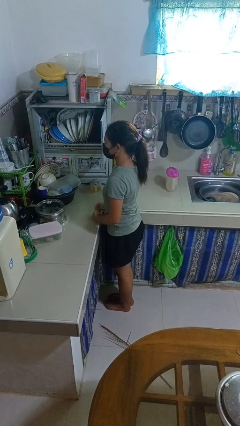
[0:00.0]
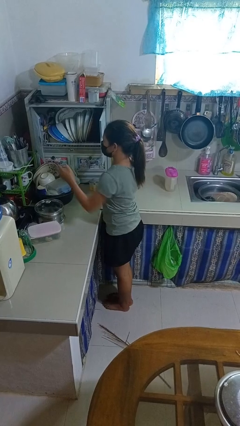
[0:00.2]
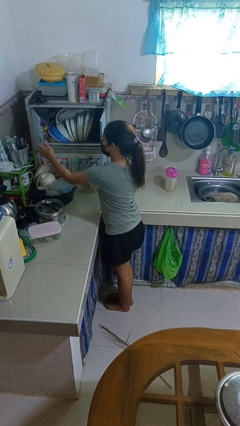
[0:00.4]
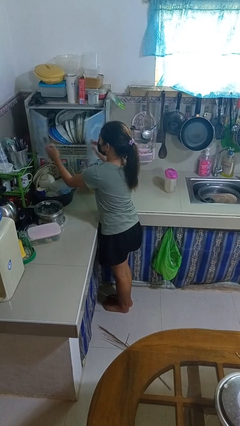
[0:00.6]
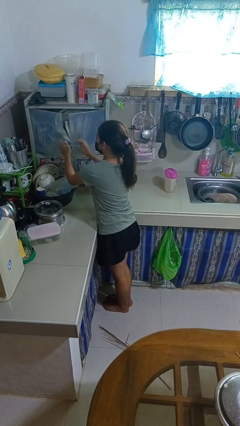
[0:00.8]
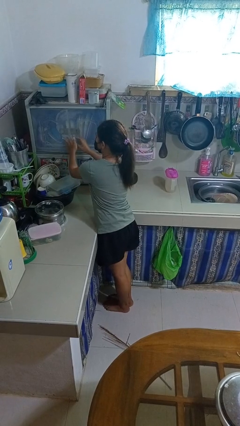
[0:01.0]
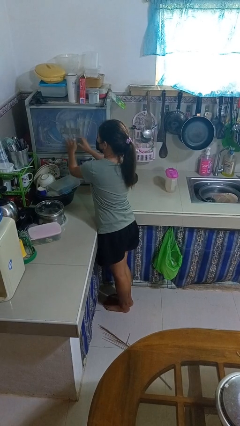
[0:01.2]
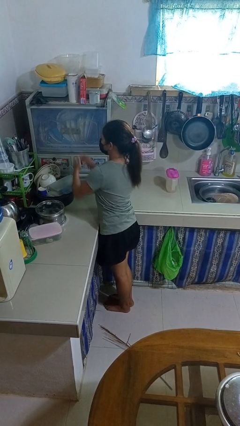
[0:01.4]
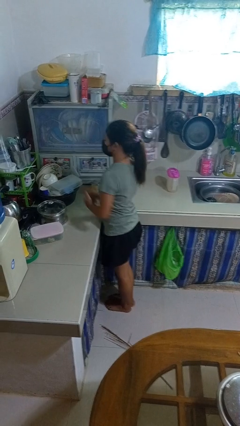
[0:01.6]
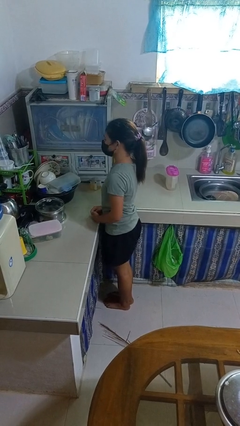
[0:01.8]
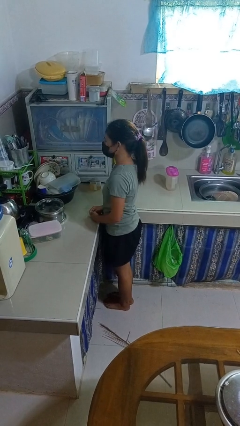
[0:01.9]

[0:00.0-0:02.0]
person closes kitchen drawer

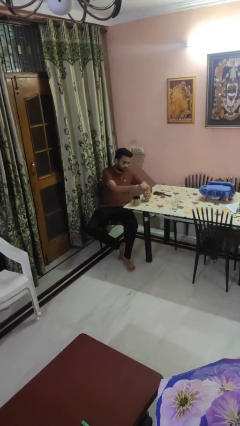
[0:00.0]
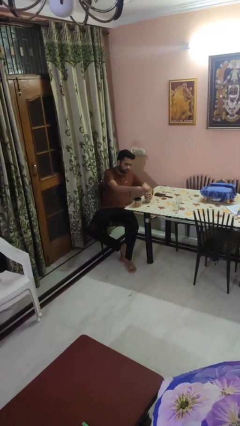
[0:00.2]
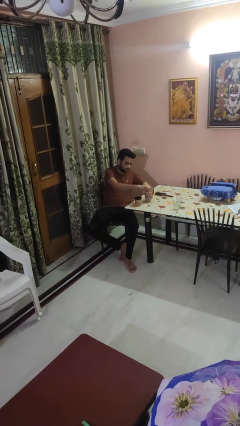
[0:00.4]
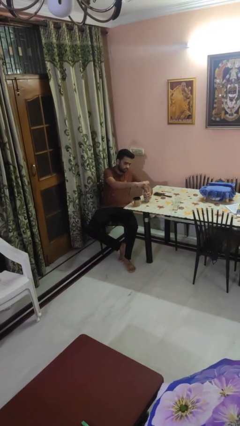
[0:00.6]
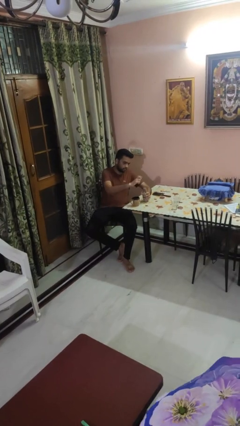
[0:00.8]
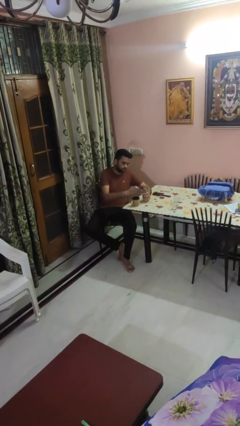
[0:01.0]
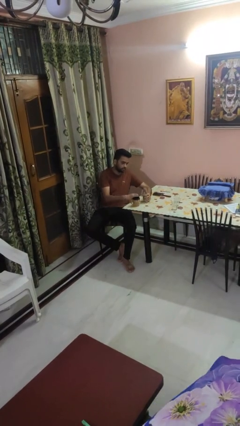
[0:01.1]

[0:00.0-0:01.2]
person unscrews lid from bottle

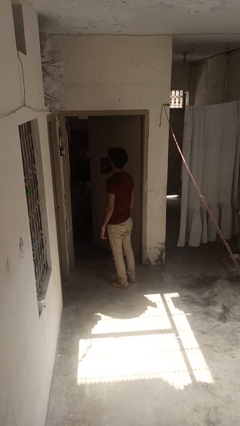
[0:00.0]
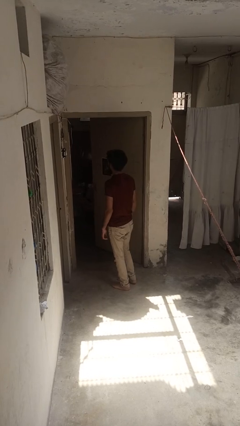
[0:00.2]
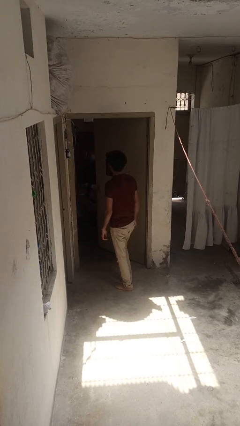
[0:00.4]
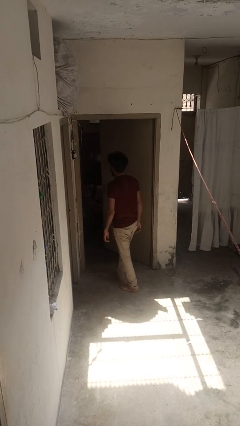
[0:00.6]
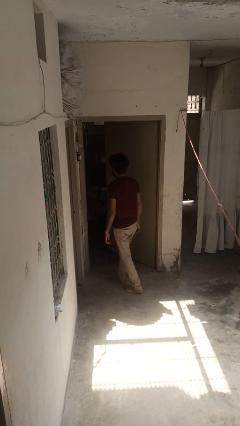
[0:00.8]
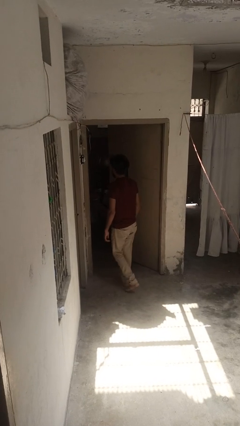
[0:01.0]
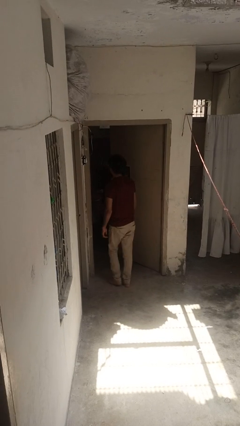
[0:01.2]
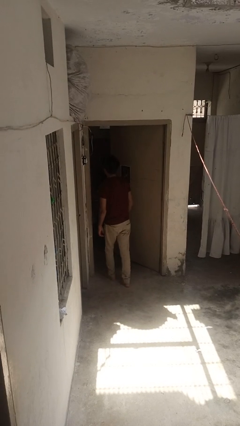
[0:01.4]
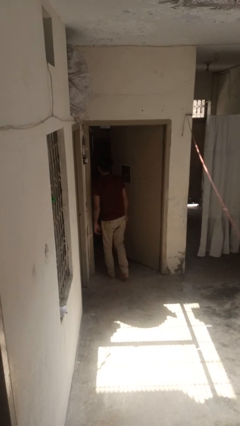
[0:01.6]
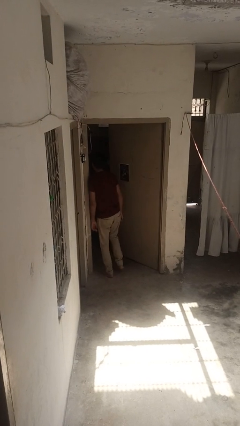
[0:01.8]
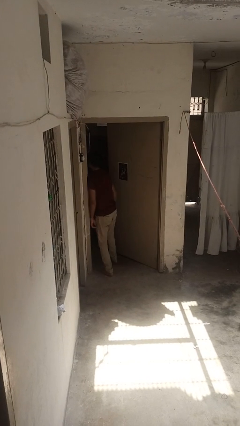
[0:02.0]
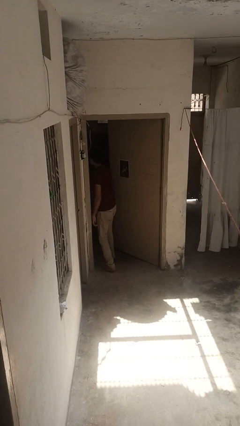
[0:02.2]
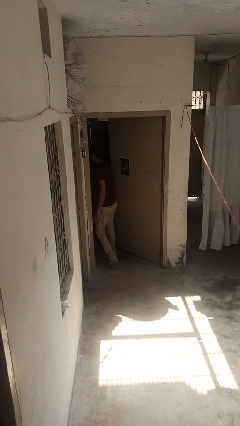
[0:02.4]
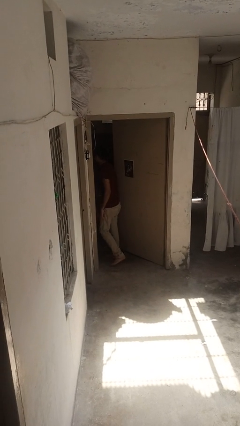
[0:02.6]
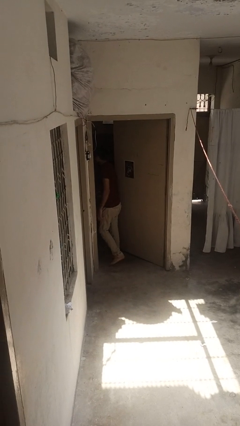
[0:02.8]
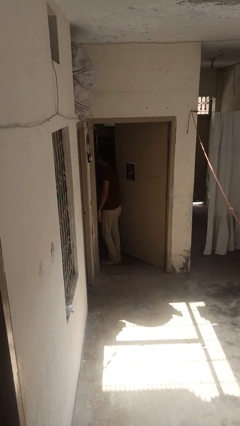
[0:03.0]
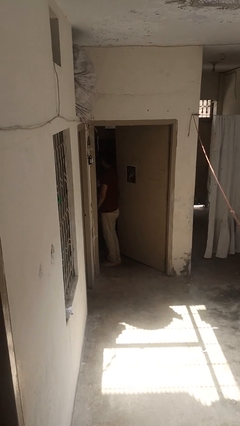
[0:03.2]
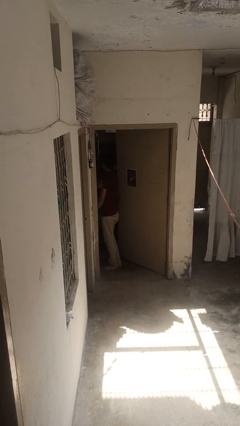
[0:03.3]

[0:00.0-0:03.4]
person bumps into wall

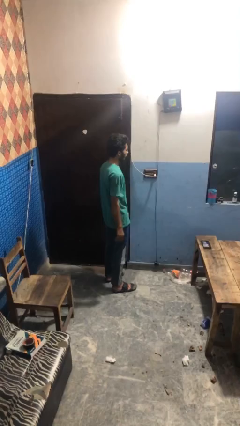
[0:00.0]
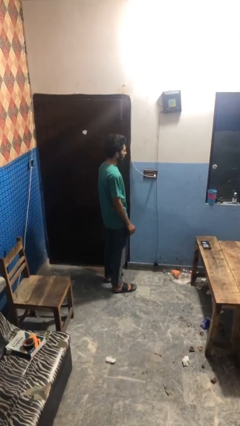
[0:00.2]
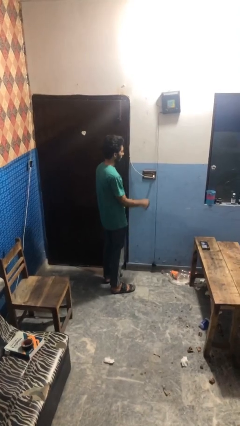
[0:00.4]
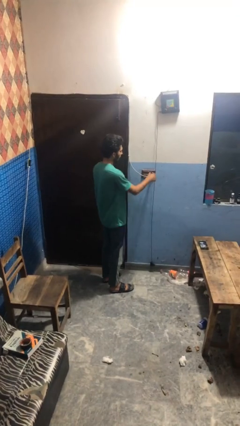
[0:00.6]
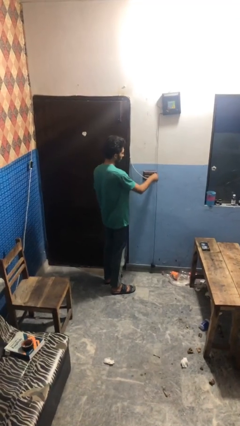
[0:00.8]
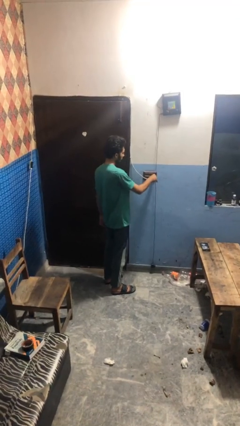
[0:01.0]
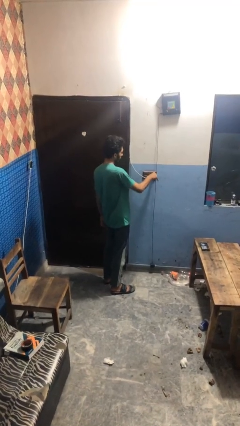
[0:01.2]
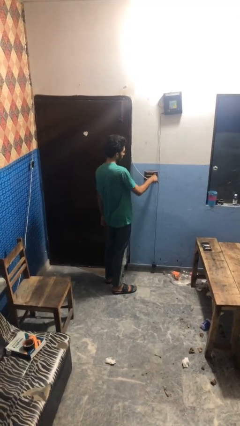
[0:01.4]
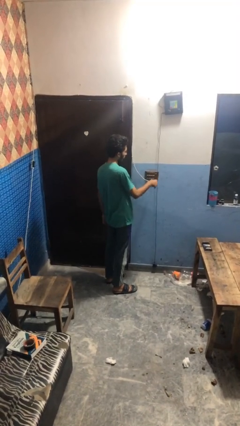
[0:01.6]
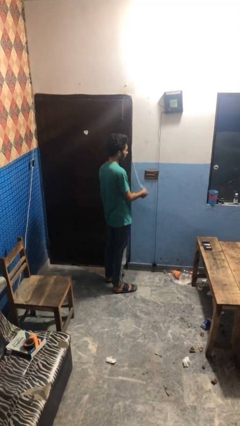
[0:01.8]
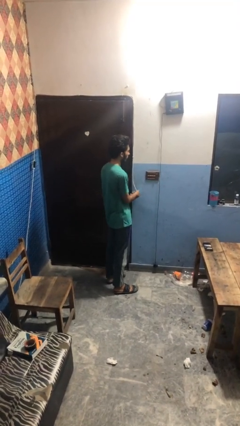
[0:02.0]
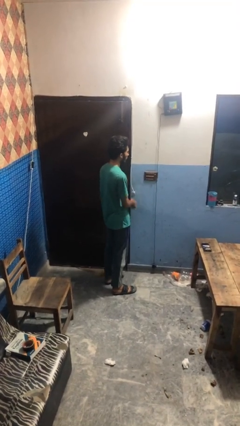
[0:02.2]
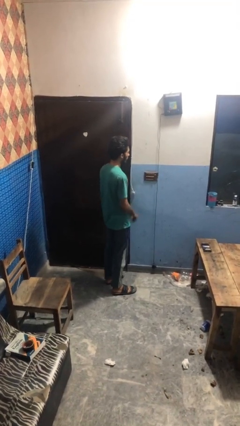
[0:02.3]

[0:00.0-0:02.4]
person unplugs from electrical socket

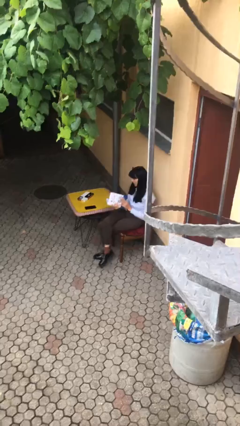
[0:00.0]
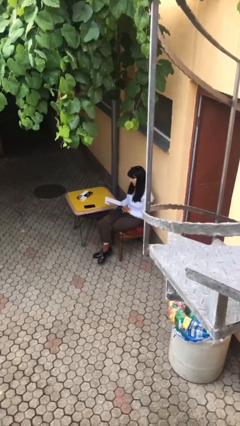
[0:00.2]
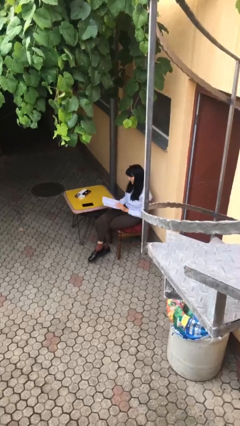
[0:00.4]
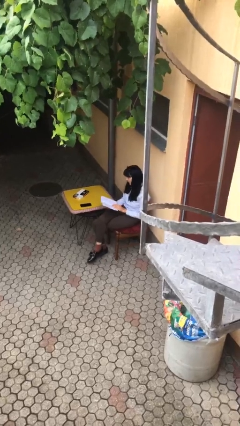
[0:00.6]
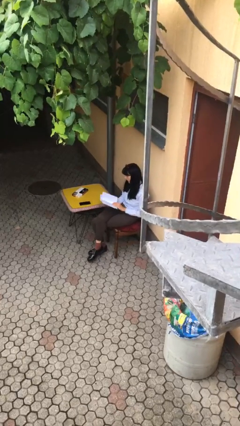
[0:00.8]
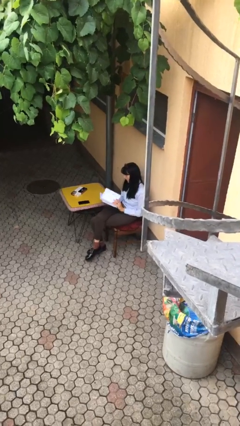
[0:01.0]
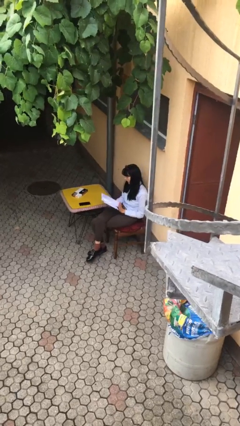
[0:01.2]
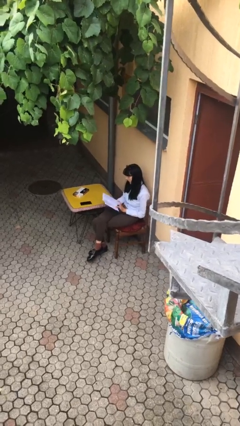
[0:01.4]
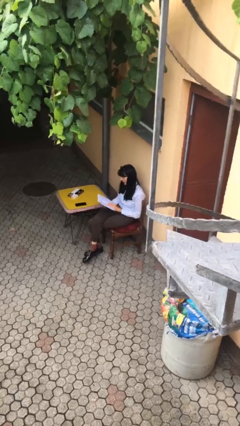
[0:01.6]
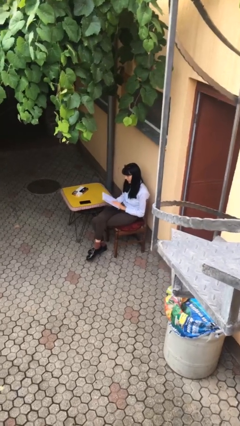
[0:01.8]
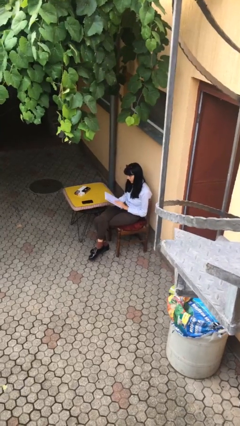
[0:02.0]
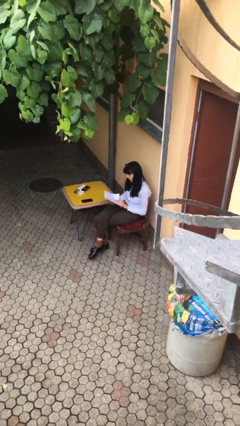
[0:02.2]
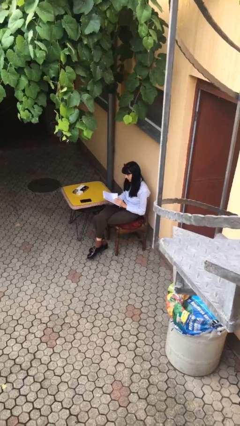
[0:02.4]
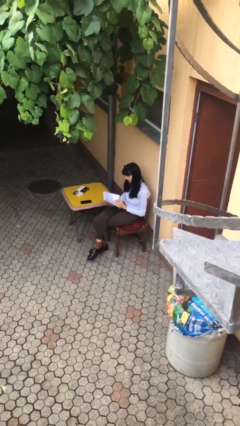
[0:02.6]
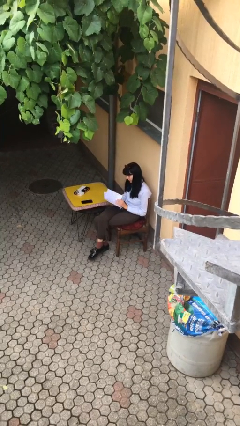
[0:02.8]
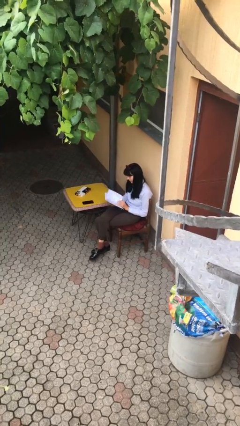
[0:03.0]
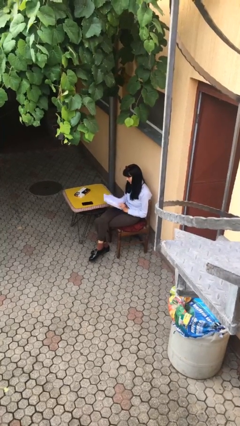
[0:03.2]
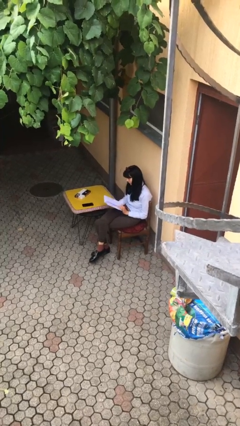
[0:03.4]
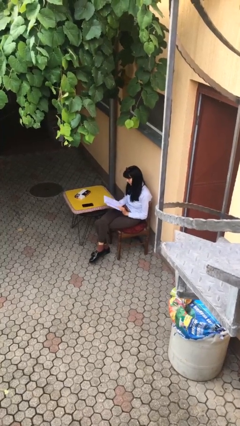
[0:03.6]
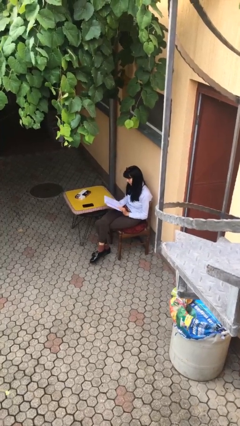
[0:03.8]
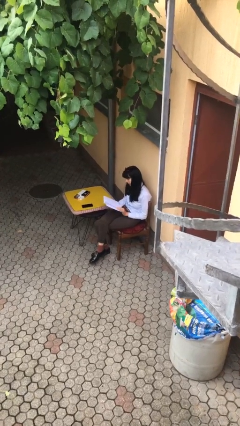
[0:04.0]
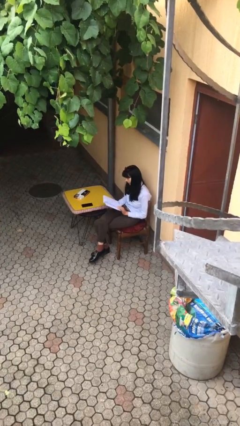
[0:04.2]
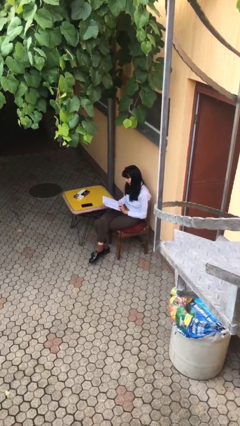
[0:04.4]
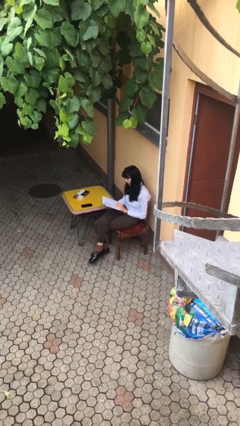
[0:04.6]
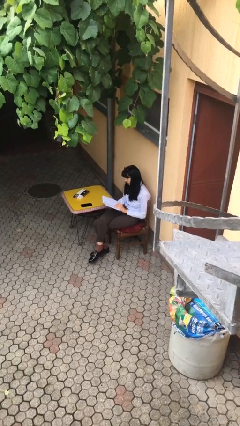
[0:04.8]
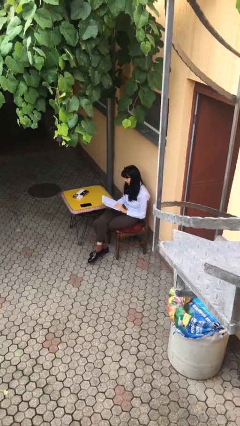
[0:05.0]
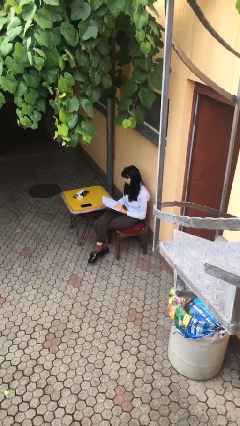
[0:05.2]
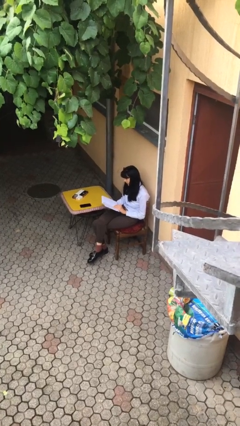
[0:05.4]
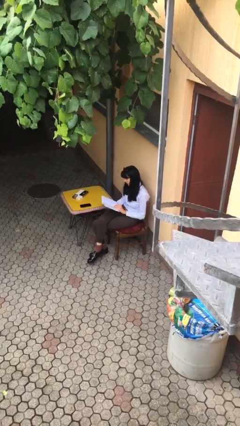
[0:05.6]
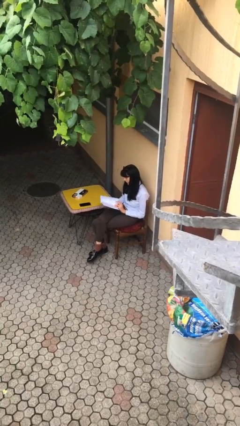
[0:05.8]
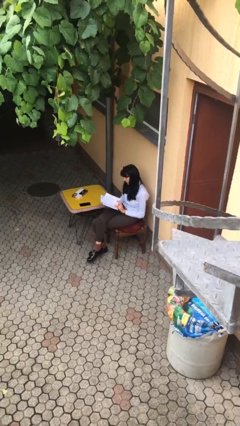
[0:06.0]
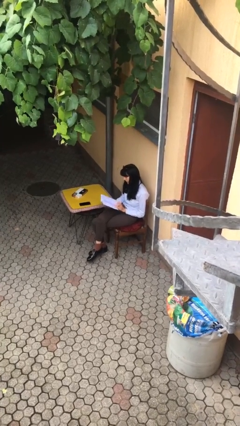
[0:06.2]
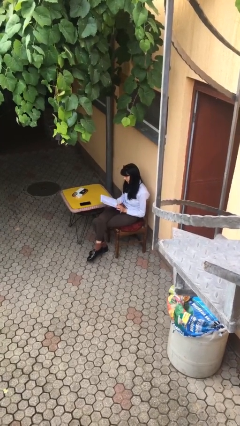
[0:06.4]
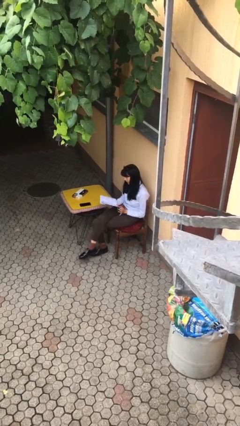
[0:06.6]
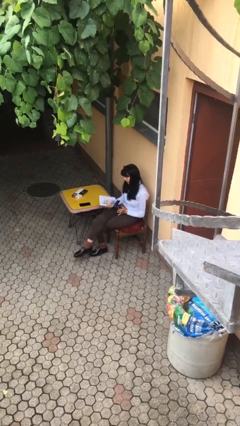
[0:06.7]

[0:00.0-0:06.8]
person reads document

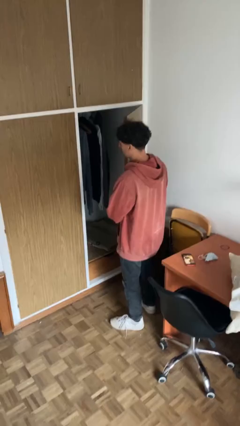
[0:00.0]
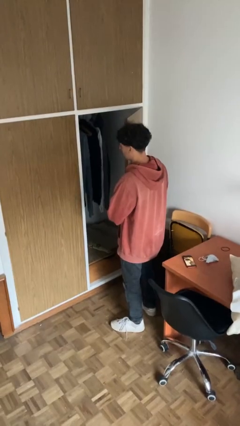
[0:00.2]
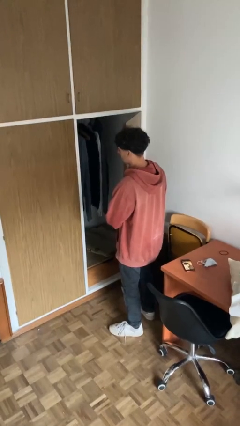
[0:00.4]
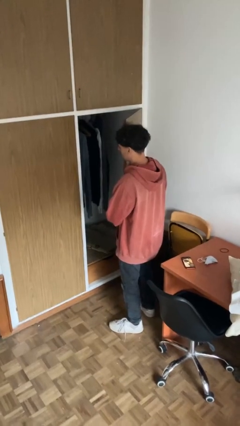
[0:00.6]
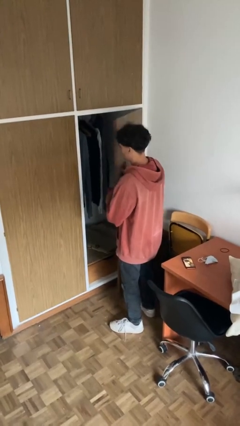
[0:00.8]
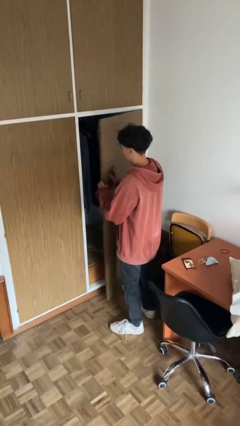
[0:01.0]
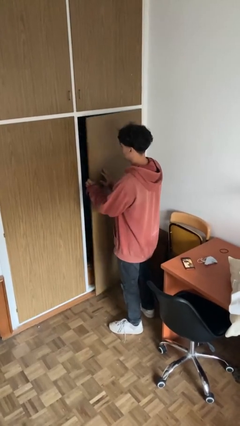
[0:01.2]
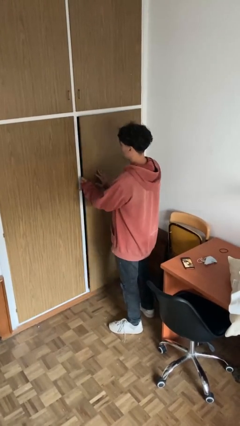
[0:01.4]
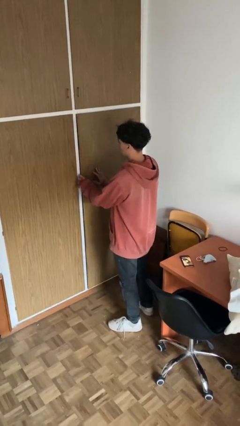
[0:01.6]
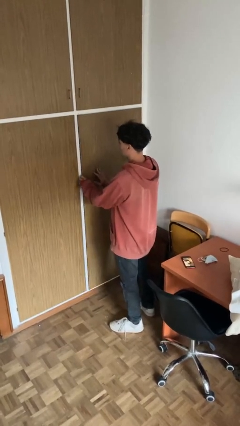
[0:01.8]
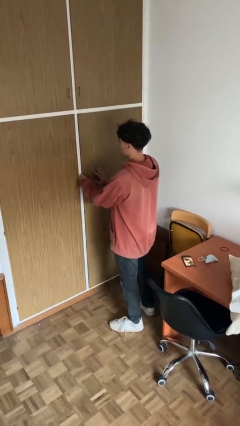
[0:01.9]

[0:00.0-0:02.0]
person closes closet door
